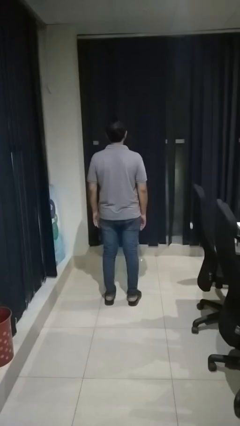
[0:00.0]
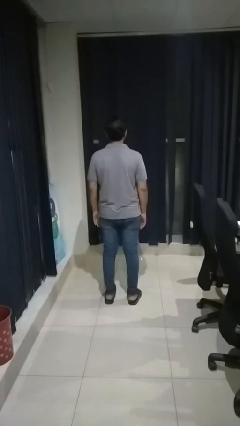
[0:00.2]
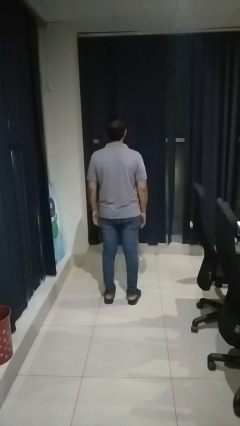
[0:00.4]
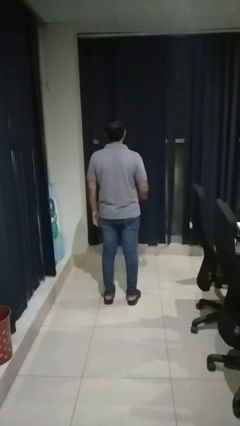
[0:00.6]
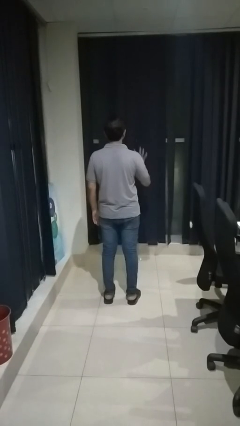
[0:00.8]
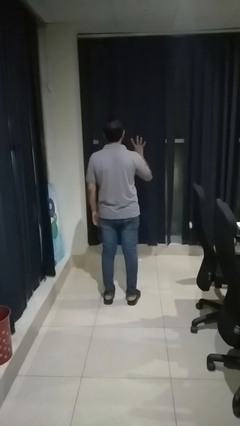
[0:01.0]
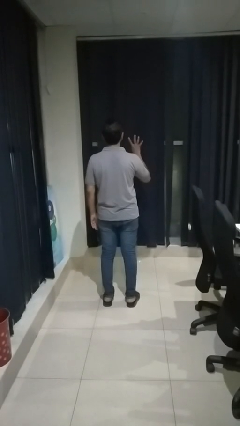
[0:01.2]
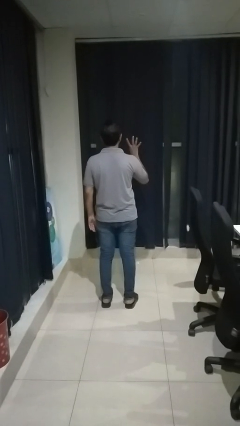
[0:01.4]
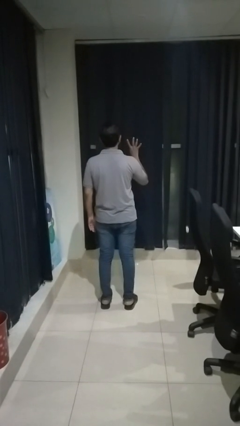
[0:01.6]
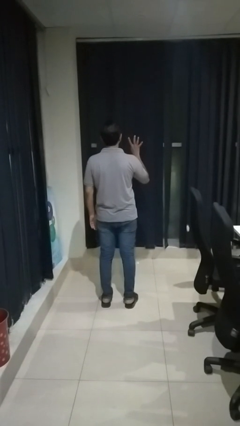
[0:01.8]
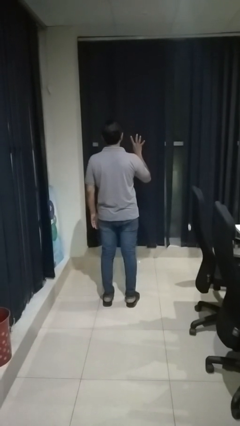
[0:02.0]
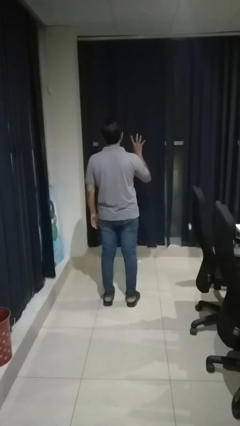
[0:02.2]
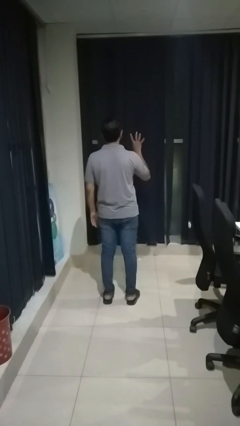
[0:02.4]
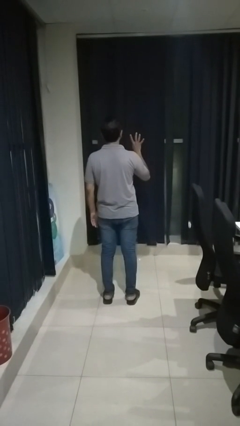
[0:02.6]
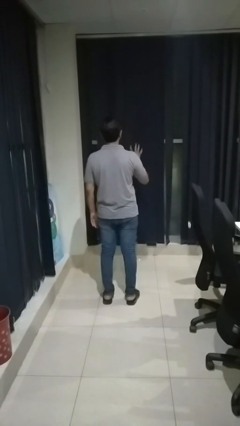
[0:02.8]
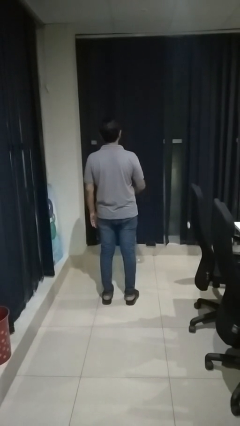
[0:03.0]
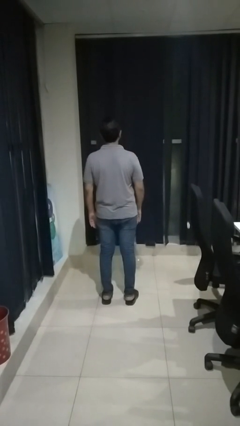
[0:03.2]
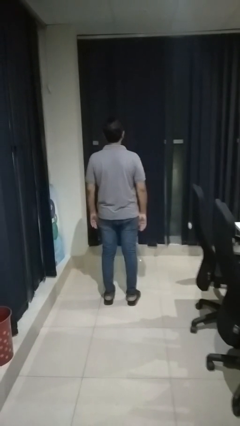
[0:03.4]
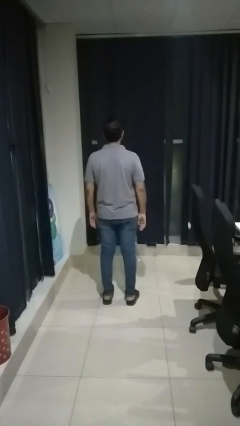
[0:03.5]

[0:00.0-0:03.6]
person gestures number four

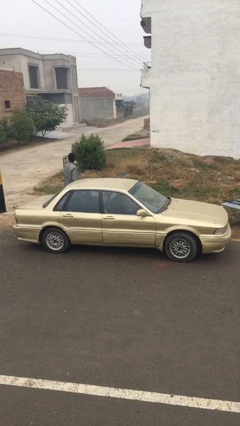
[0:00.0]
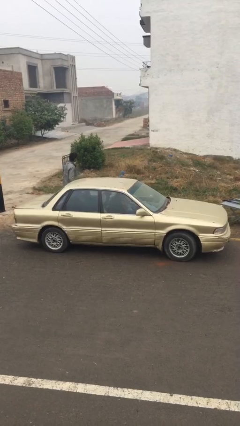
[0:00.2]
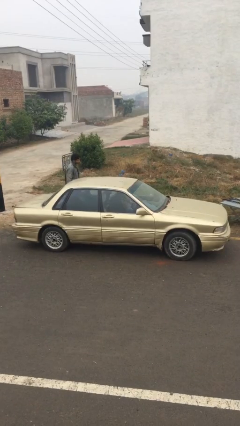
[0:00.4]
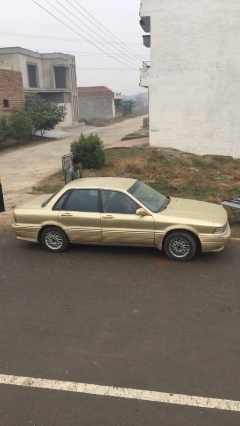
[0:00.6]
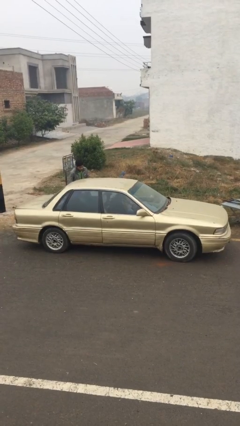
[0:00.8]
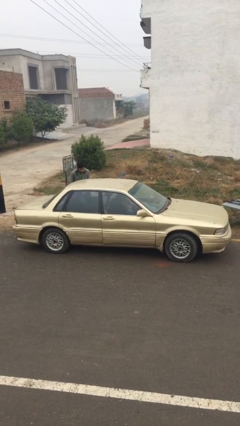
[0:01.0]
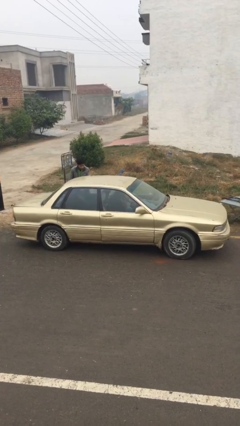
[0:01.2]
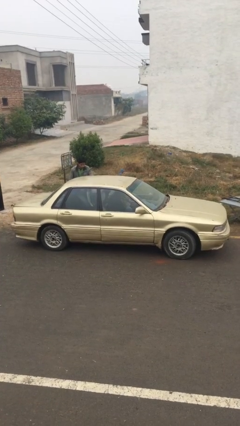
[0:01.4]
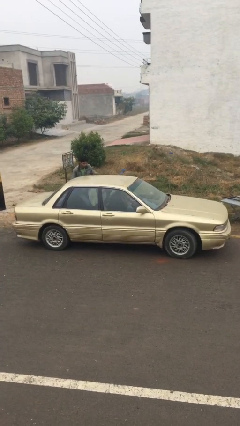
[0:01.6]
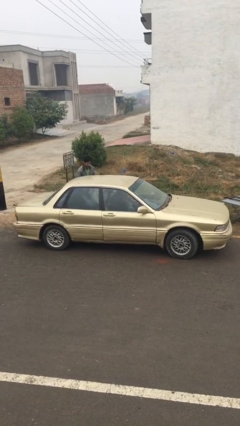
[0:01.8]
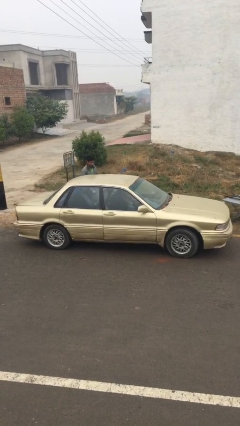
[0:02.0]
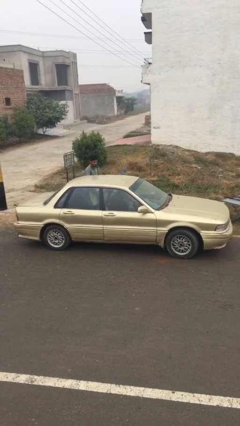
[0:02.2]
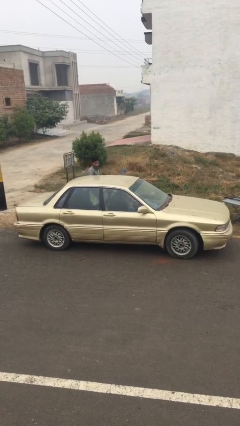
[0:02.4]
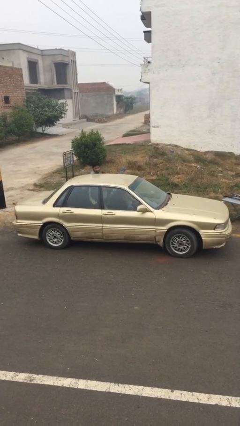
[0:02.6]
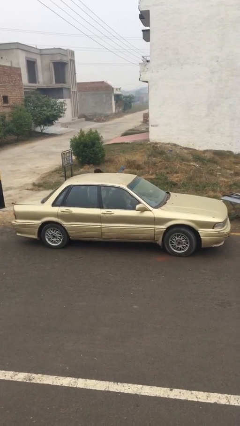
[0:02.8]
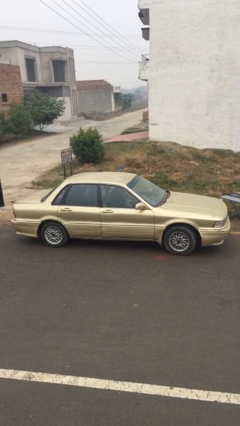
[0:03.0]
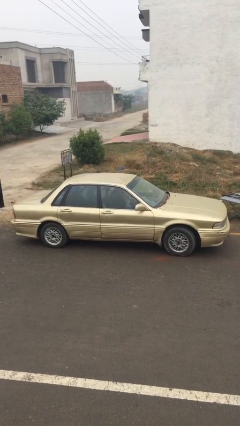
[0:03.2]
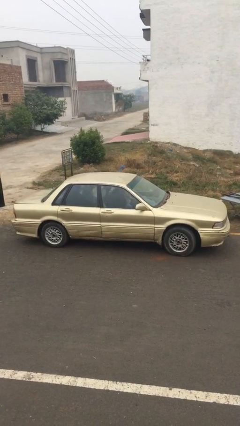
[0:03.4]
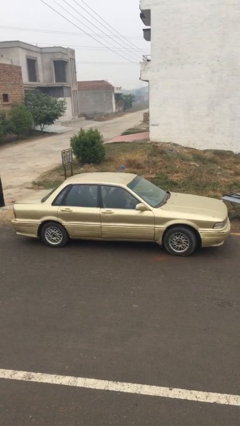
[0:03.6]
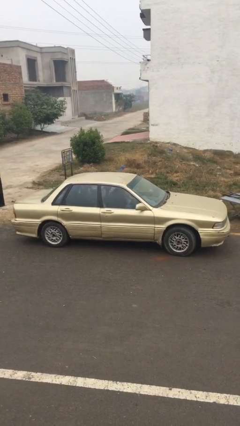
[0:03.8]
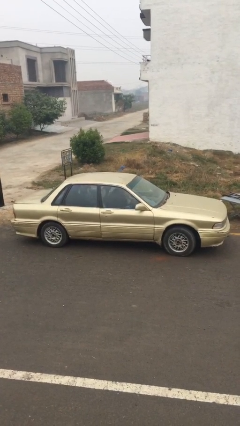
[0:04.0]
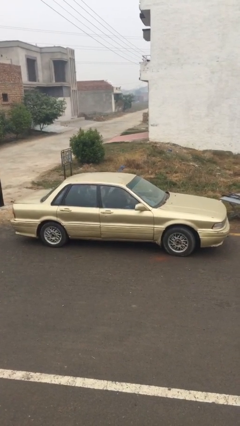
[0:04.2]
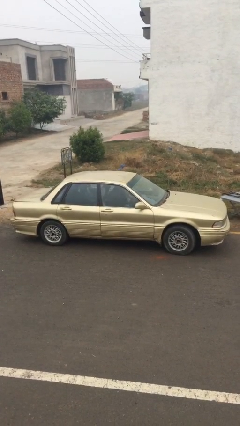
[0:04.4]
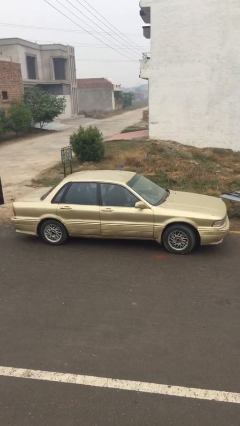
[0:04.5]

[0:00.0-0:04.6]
car picks up person

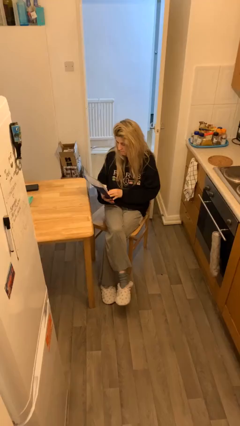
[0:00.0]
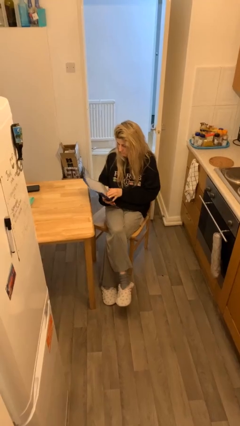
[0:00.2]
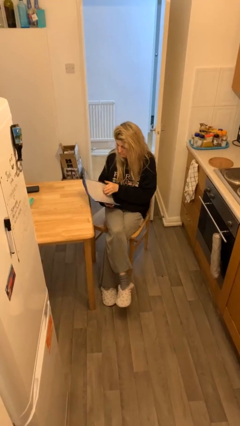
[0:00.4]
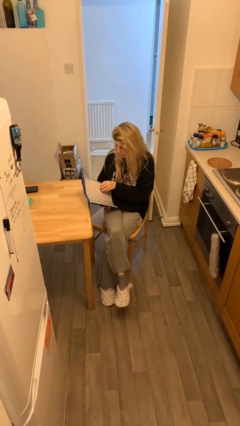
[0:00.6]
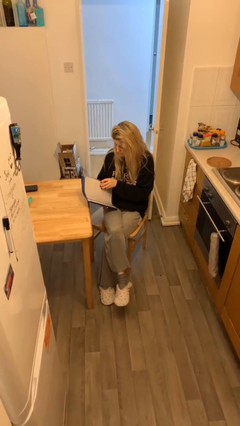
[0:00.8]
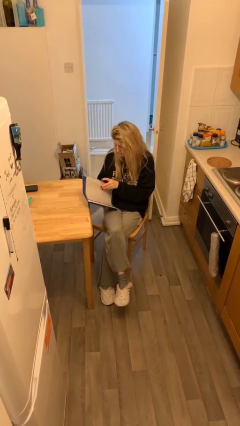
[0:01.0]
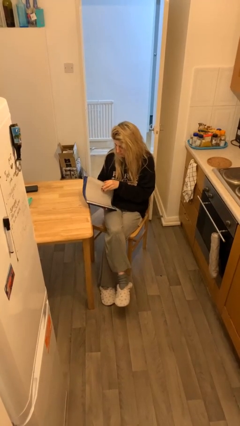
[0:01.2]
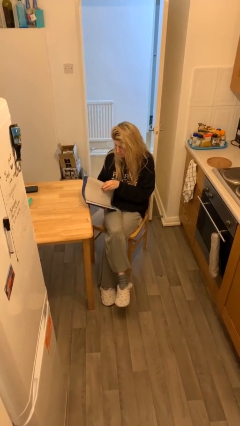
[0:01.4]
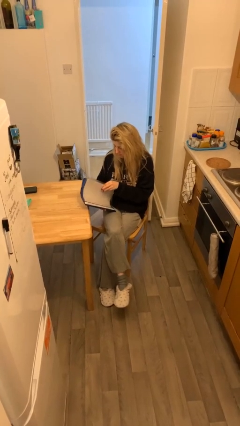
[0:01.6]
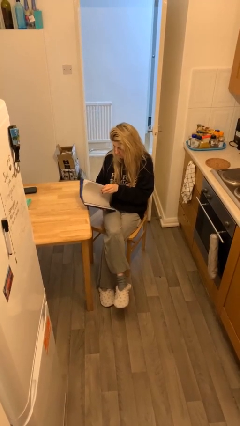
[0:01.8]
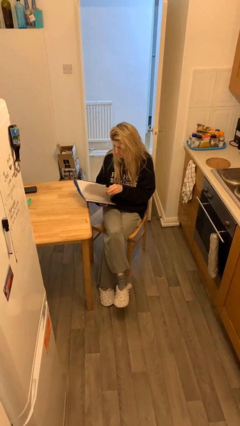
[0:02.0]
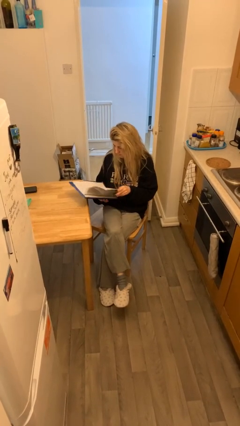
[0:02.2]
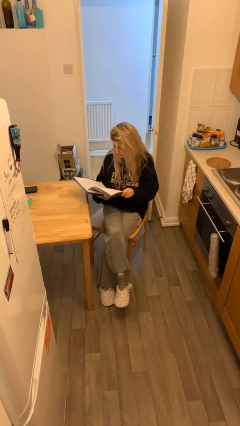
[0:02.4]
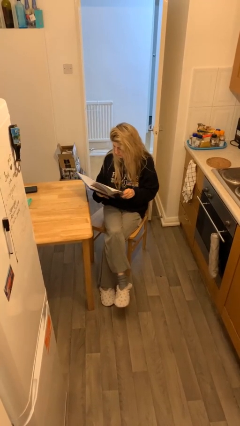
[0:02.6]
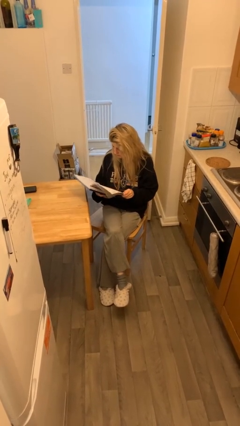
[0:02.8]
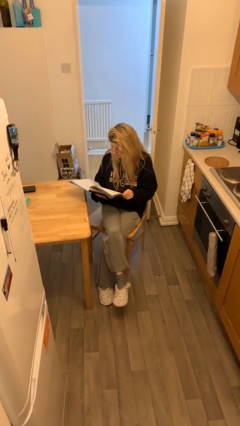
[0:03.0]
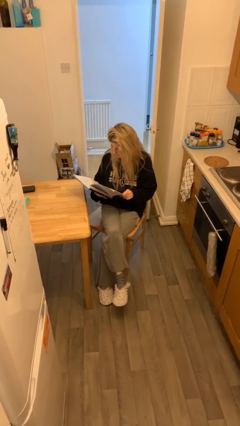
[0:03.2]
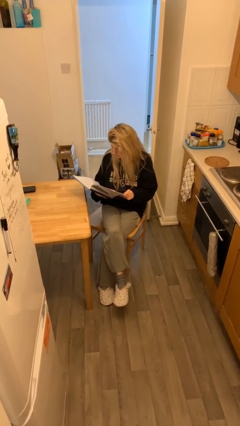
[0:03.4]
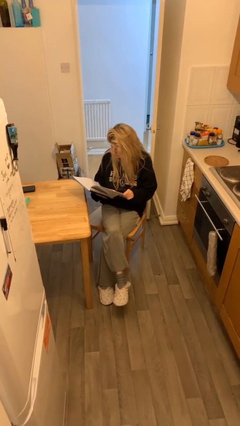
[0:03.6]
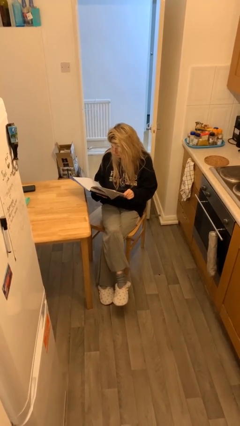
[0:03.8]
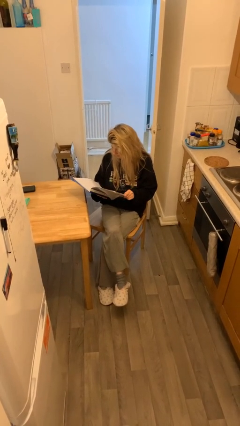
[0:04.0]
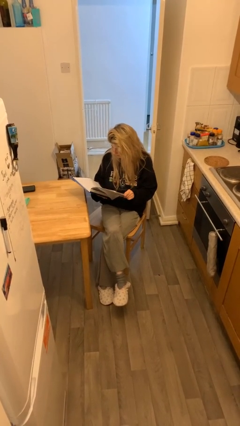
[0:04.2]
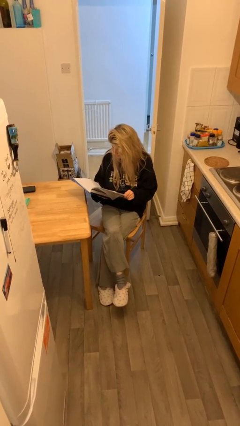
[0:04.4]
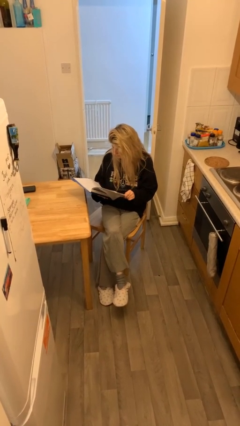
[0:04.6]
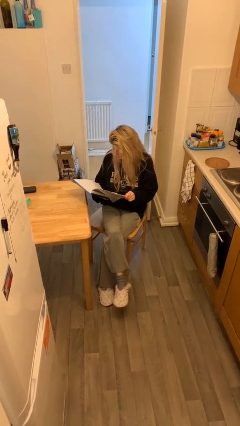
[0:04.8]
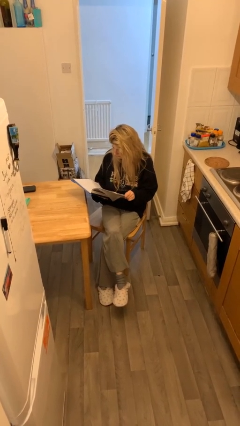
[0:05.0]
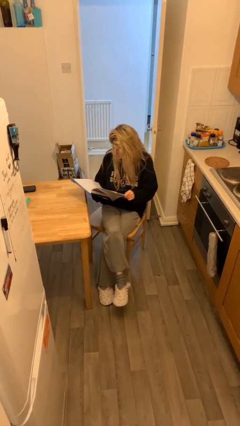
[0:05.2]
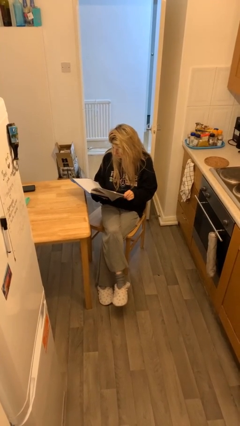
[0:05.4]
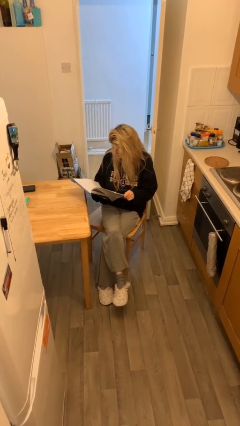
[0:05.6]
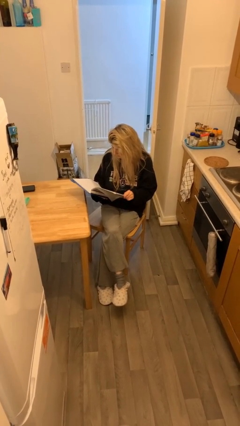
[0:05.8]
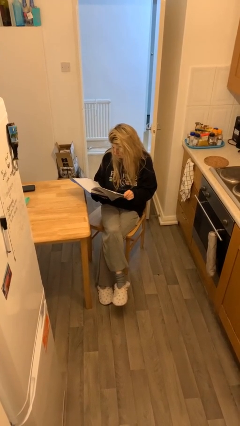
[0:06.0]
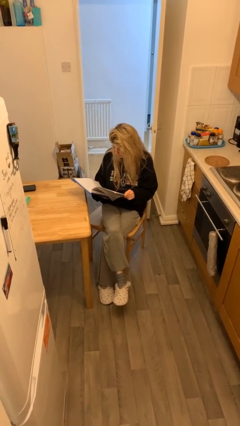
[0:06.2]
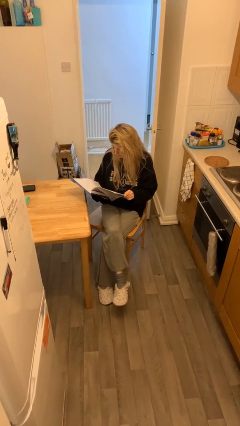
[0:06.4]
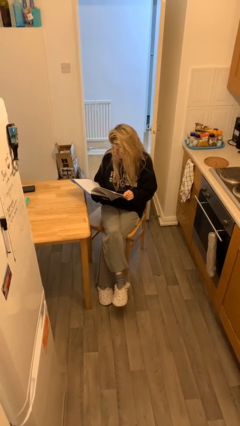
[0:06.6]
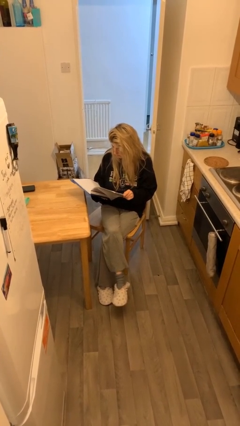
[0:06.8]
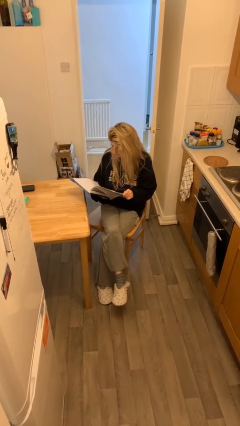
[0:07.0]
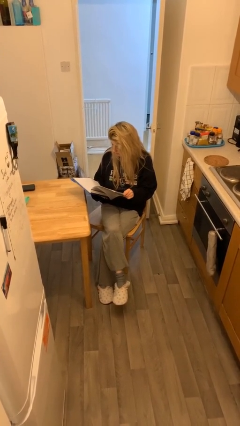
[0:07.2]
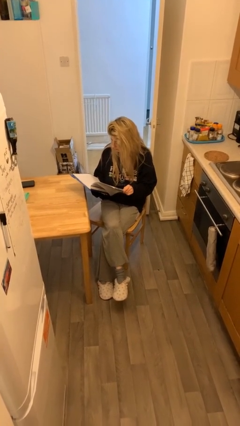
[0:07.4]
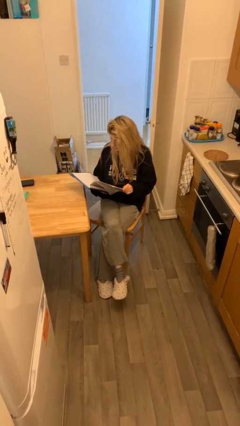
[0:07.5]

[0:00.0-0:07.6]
person reads document

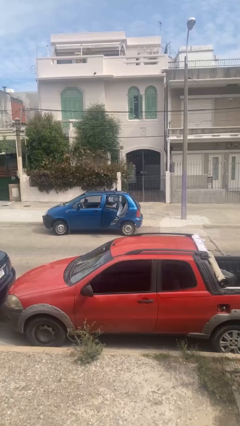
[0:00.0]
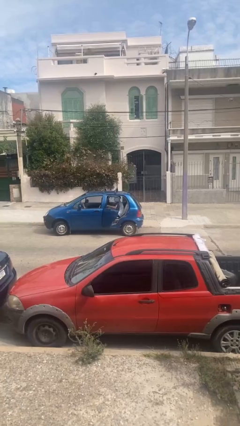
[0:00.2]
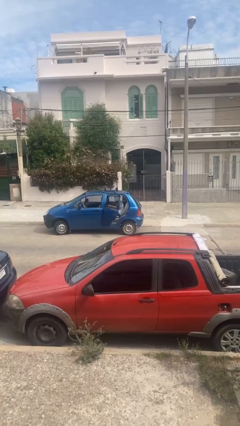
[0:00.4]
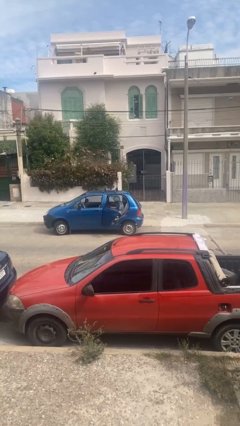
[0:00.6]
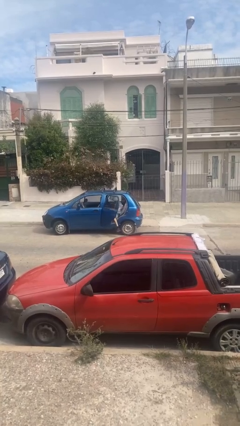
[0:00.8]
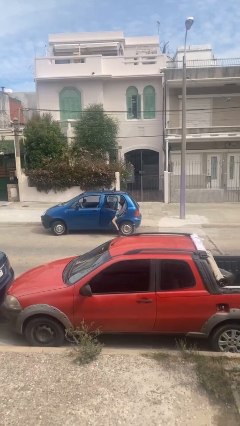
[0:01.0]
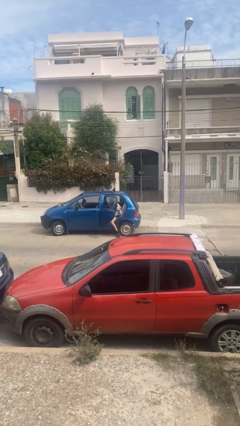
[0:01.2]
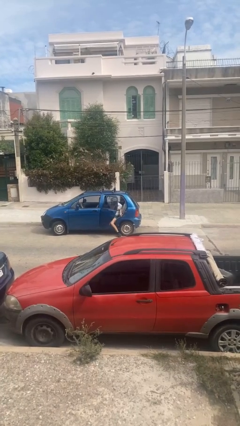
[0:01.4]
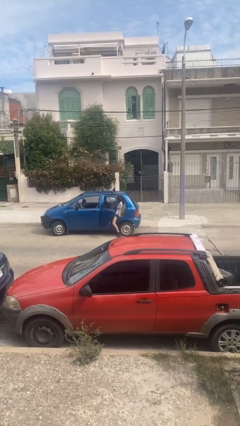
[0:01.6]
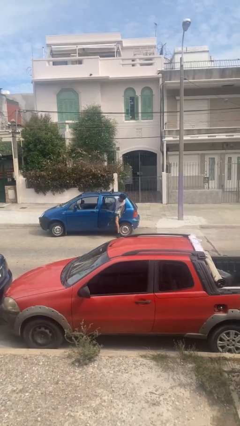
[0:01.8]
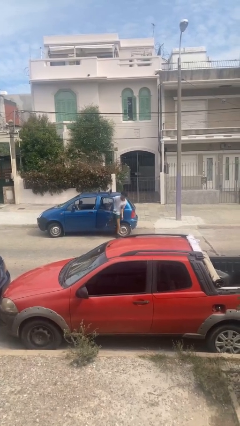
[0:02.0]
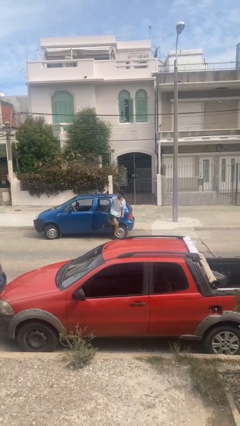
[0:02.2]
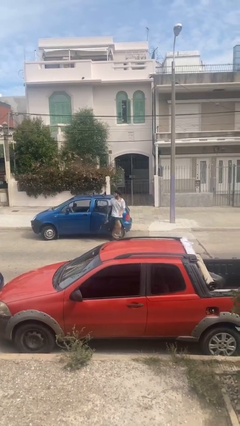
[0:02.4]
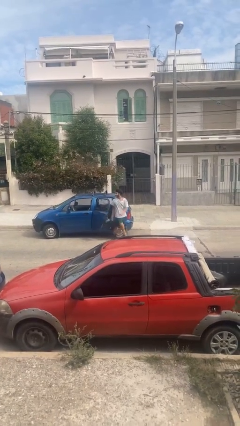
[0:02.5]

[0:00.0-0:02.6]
person exits car
